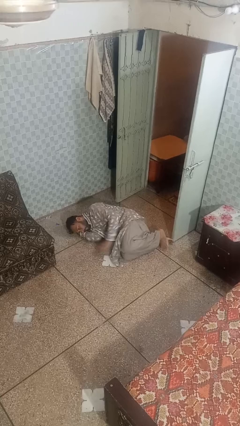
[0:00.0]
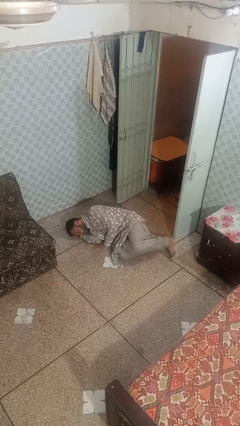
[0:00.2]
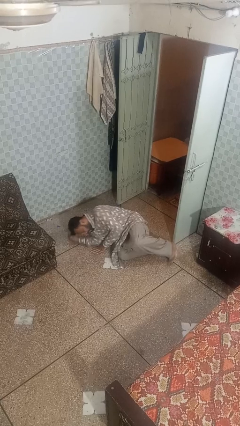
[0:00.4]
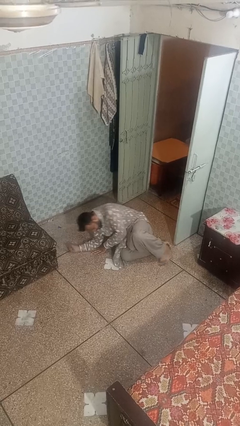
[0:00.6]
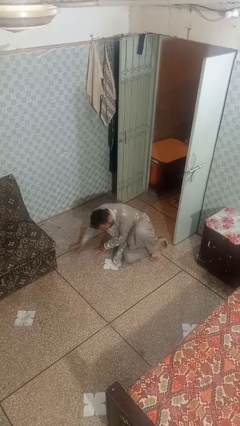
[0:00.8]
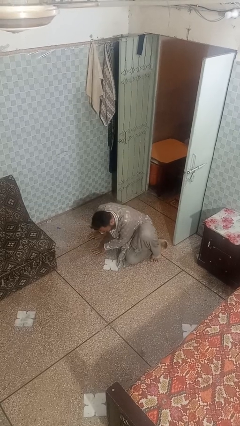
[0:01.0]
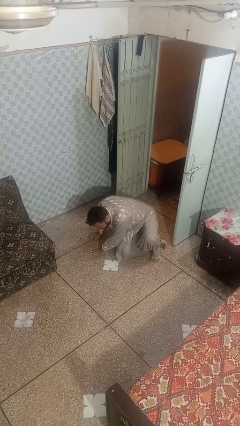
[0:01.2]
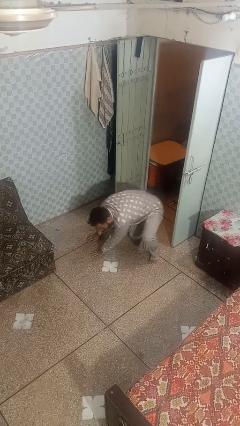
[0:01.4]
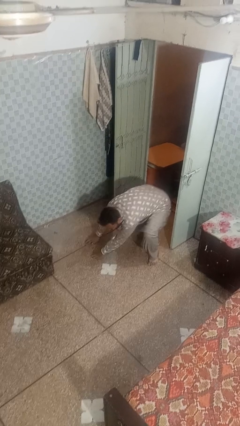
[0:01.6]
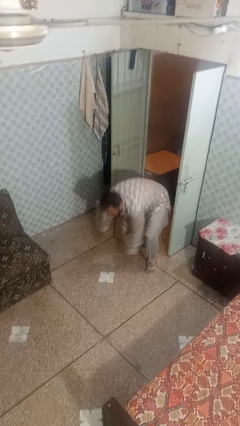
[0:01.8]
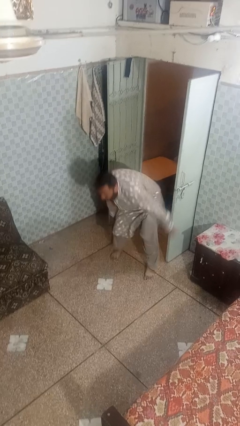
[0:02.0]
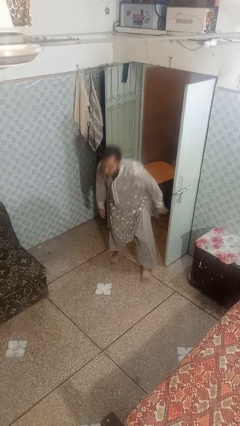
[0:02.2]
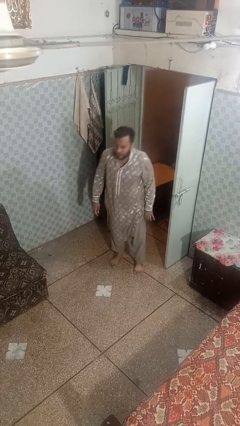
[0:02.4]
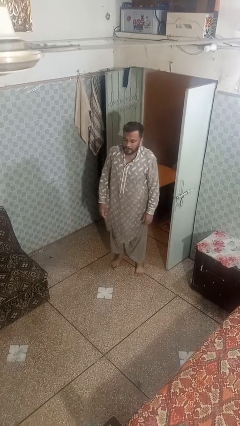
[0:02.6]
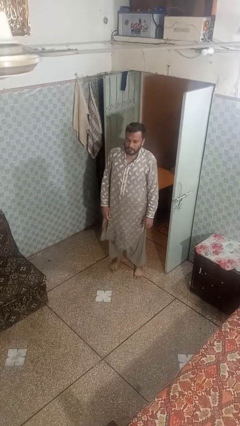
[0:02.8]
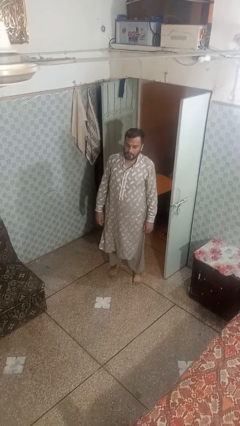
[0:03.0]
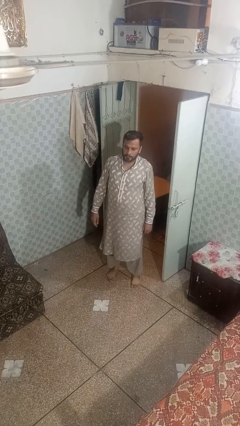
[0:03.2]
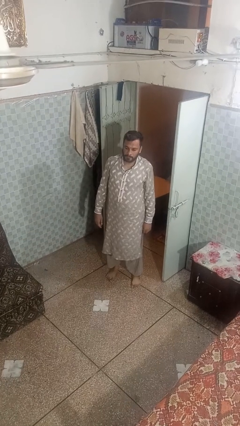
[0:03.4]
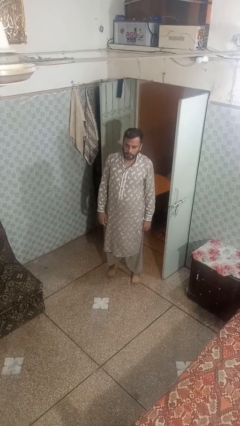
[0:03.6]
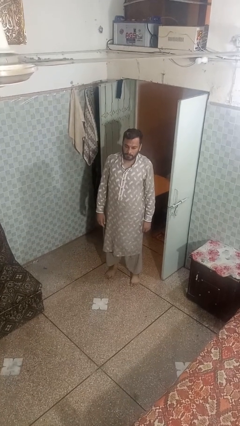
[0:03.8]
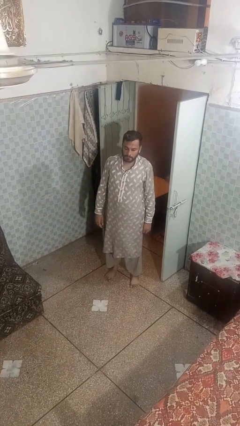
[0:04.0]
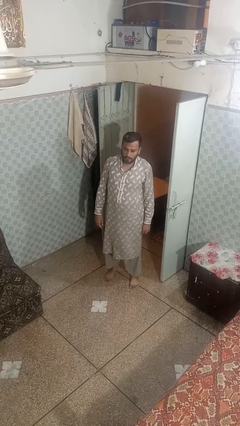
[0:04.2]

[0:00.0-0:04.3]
person stands up from floor

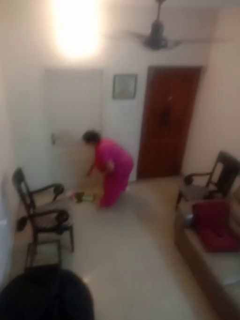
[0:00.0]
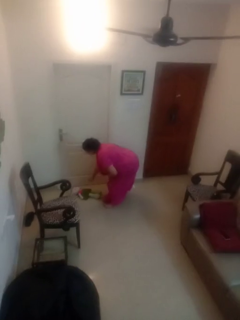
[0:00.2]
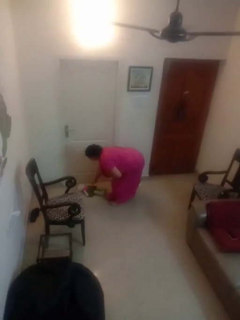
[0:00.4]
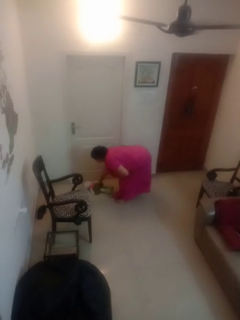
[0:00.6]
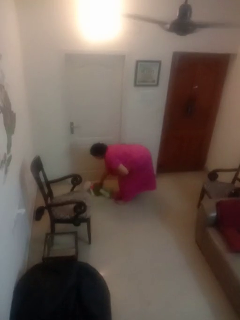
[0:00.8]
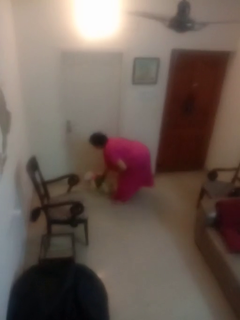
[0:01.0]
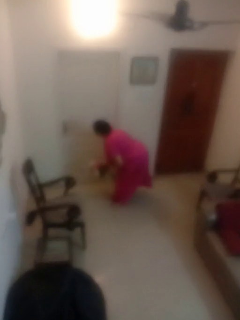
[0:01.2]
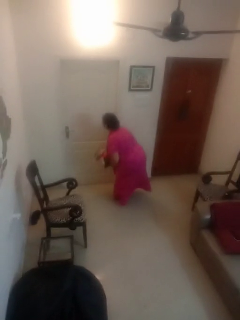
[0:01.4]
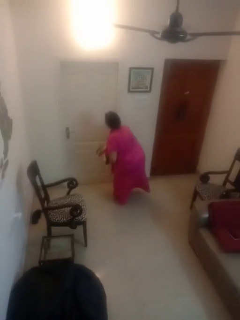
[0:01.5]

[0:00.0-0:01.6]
person picks up object from floor

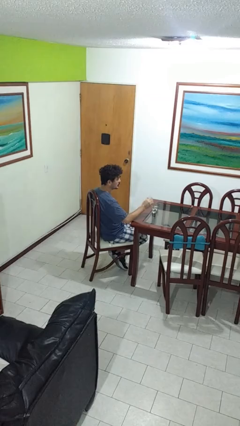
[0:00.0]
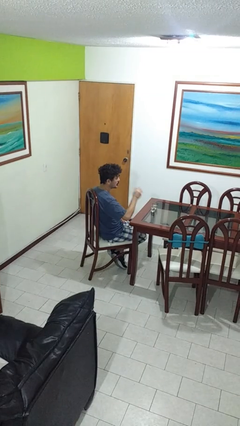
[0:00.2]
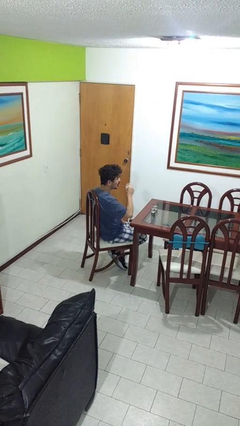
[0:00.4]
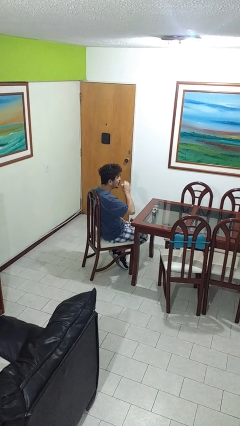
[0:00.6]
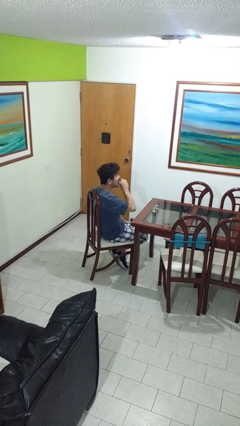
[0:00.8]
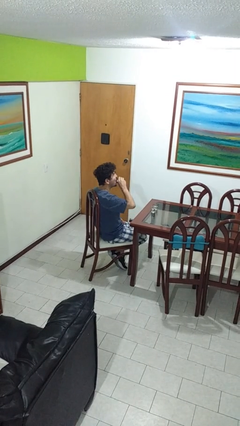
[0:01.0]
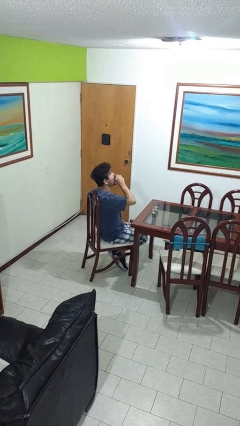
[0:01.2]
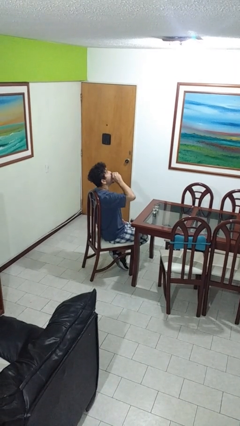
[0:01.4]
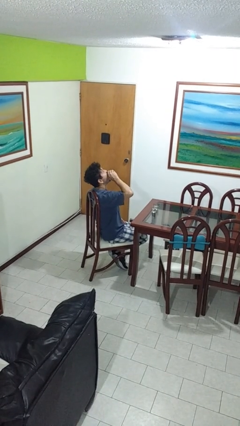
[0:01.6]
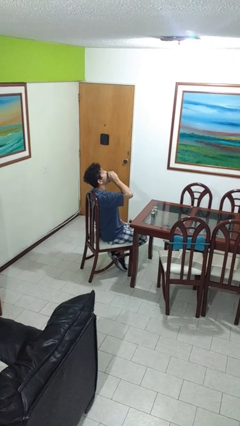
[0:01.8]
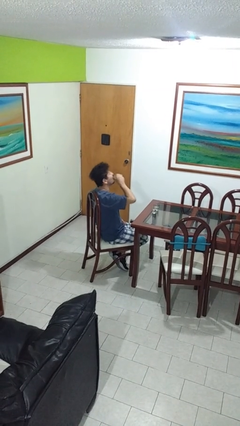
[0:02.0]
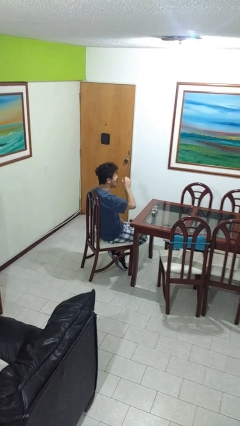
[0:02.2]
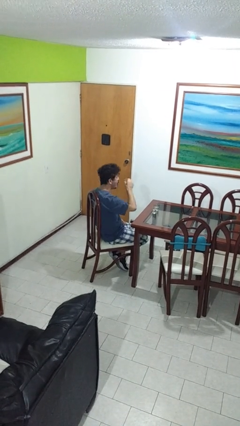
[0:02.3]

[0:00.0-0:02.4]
person drinks from shotglass

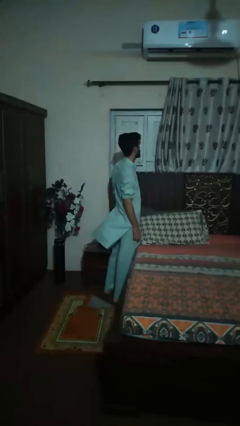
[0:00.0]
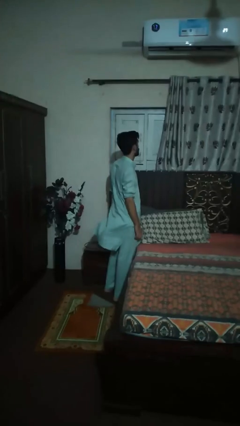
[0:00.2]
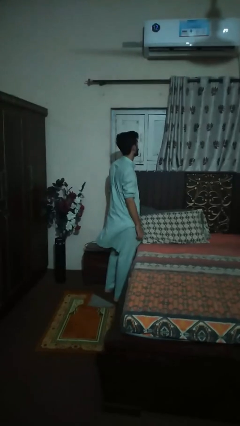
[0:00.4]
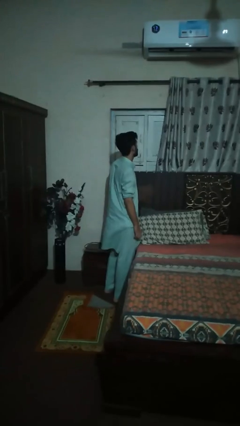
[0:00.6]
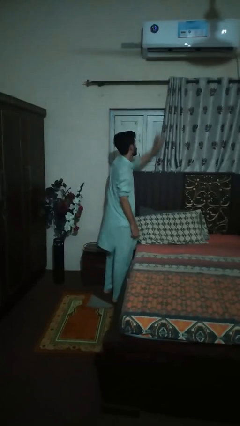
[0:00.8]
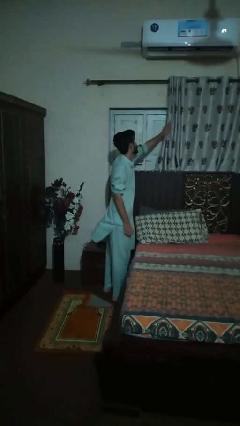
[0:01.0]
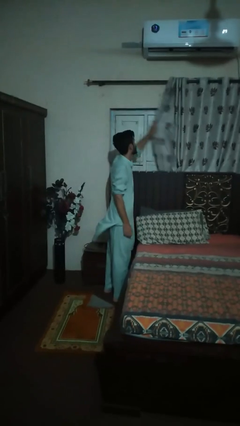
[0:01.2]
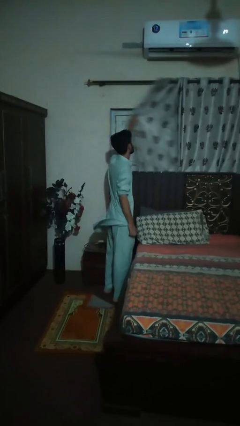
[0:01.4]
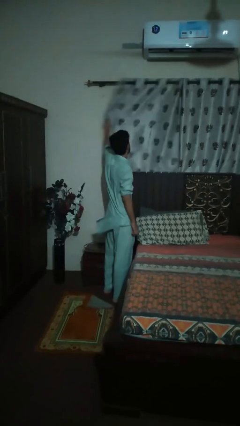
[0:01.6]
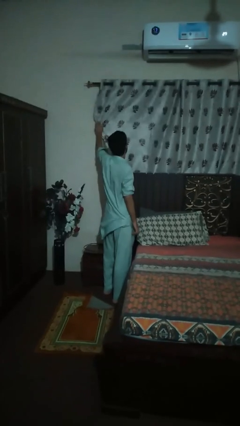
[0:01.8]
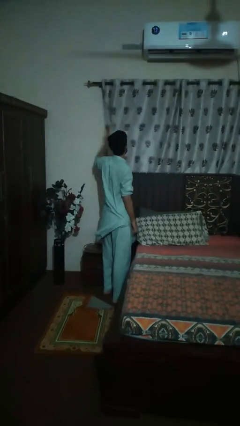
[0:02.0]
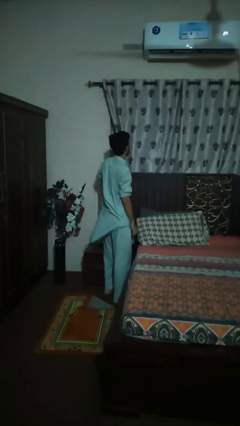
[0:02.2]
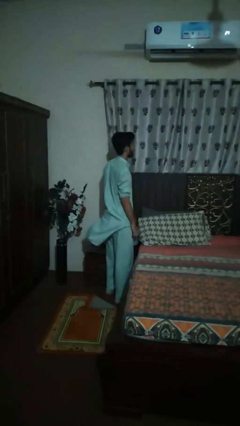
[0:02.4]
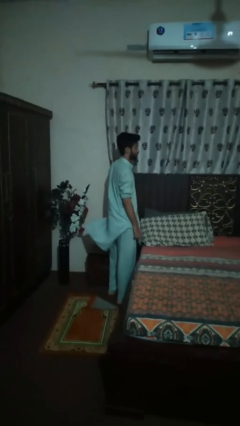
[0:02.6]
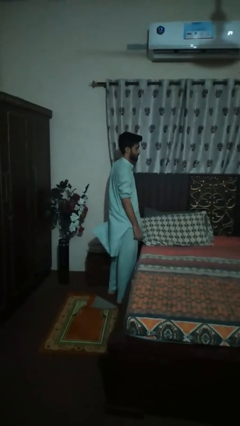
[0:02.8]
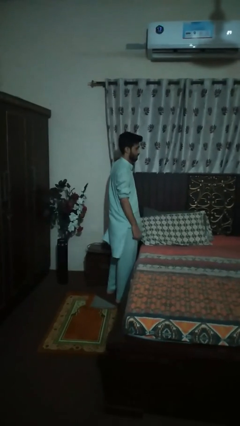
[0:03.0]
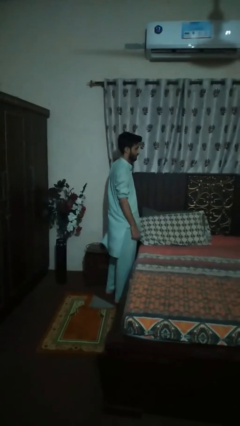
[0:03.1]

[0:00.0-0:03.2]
person closes curtains

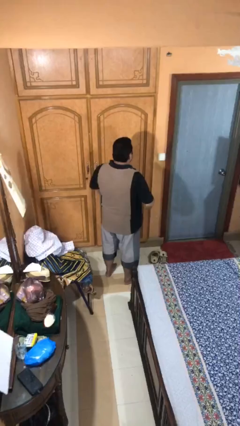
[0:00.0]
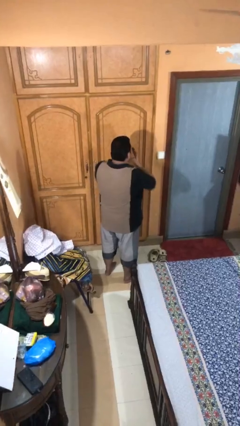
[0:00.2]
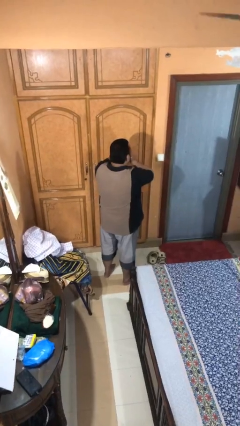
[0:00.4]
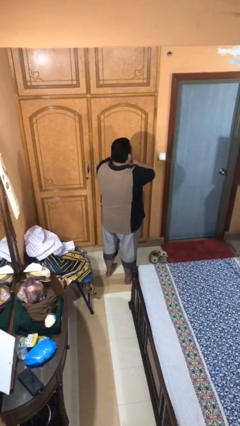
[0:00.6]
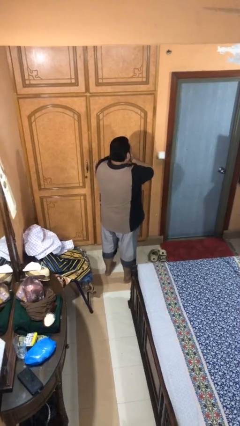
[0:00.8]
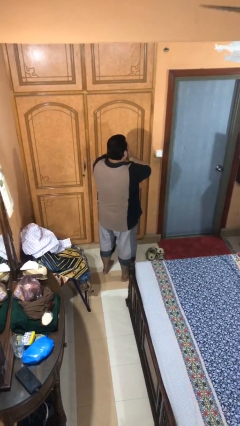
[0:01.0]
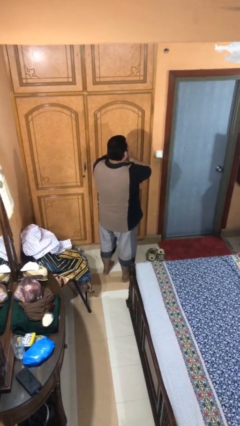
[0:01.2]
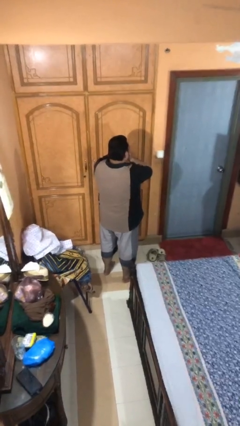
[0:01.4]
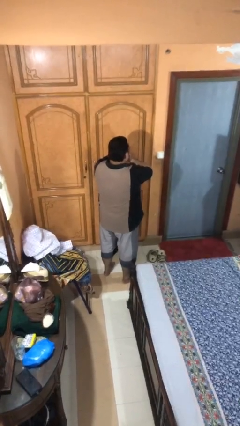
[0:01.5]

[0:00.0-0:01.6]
person covers face with hands

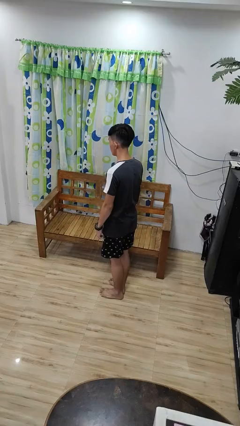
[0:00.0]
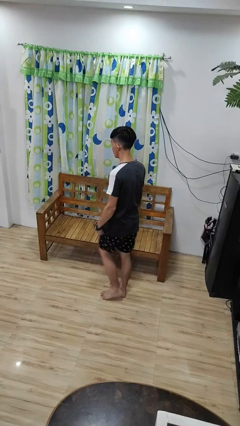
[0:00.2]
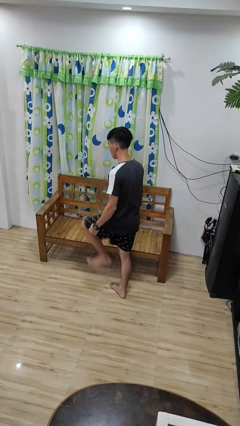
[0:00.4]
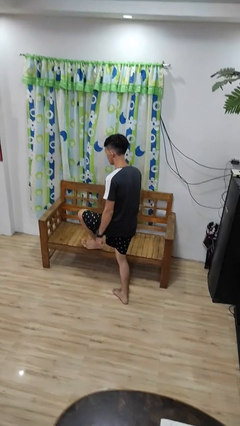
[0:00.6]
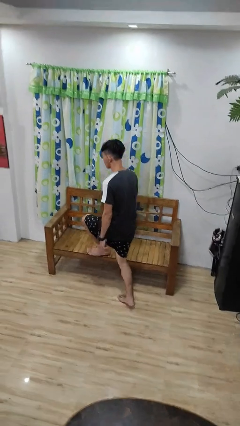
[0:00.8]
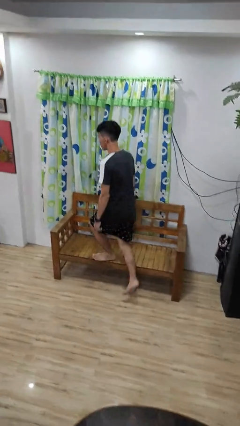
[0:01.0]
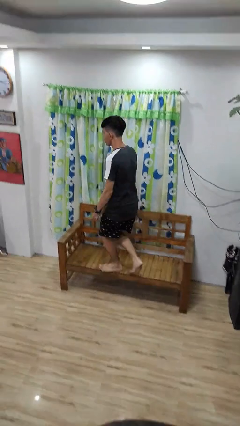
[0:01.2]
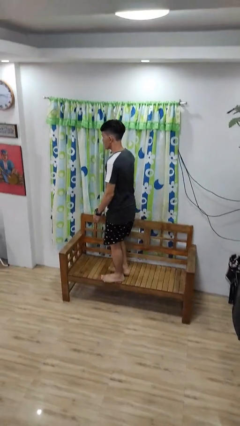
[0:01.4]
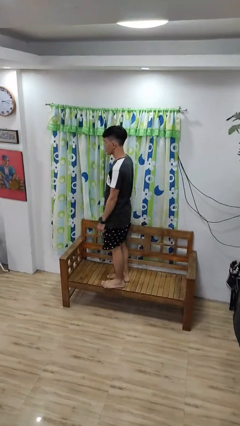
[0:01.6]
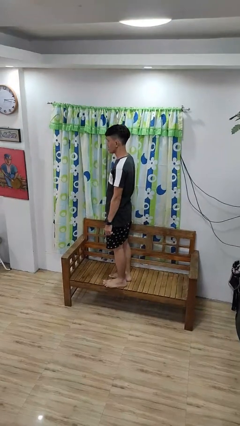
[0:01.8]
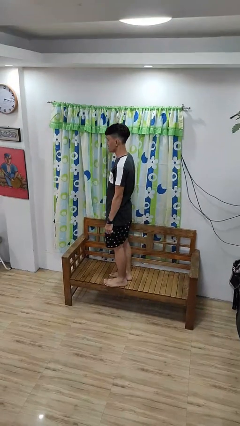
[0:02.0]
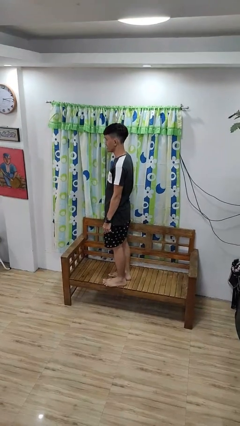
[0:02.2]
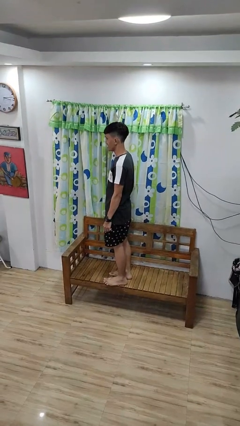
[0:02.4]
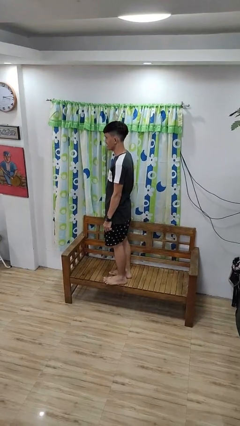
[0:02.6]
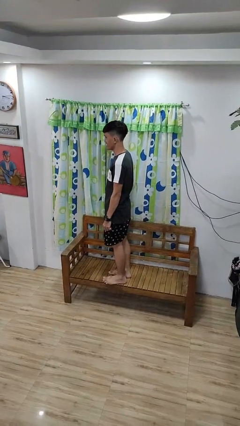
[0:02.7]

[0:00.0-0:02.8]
person climbs on couch

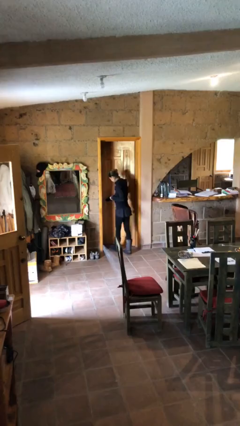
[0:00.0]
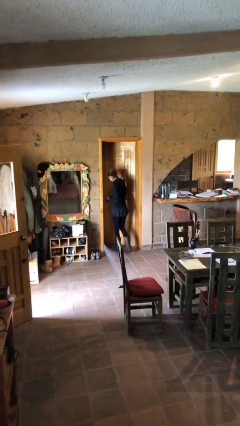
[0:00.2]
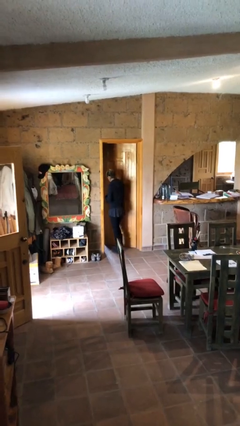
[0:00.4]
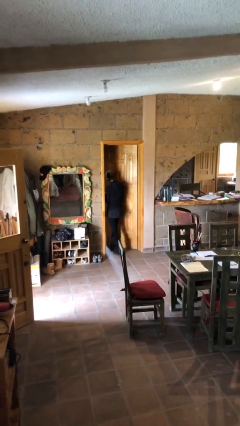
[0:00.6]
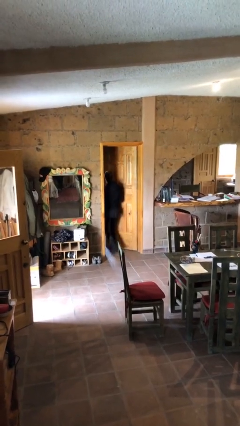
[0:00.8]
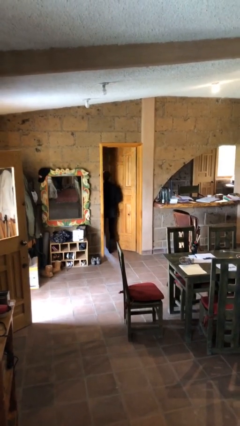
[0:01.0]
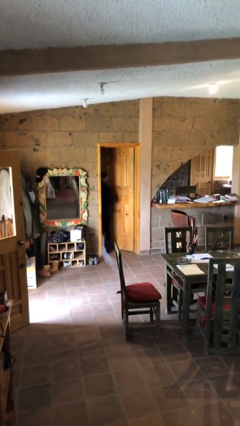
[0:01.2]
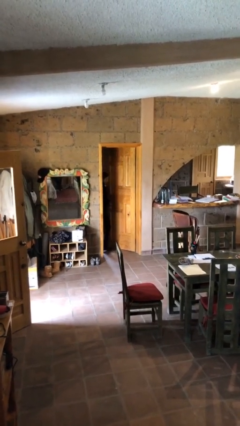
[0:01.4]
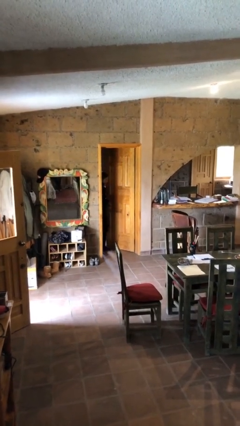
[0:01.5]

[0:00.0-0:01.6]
person exits scene through structure

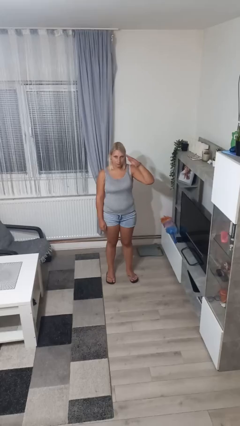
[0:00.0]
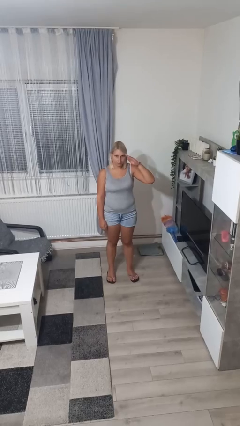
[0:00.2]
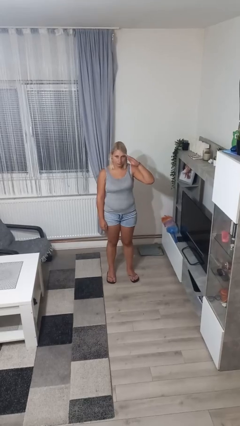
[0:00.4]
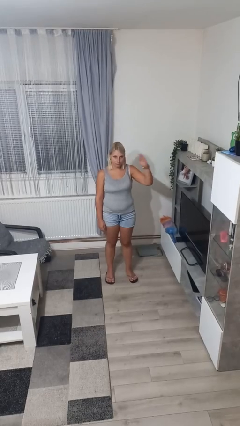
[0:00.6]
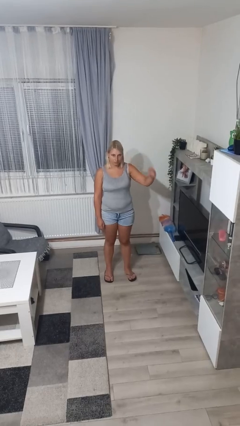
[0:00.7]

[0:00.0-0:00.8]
person salutes
